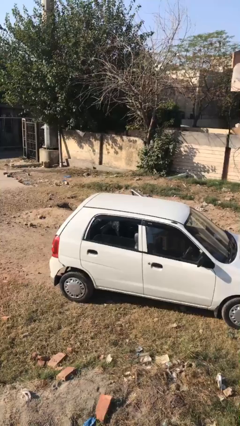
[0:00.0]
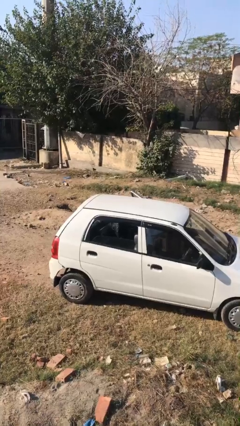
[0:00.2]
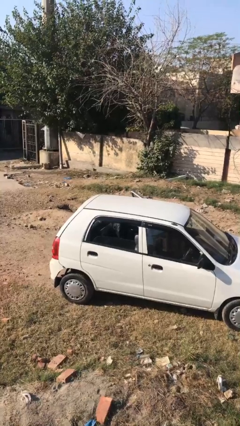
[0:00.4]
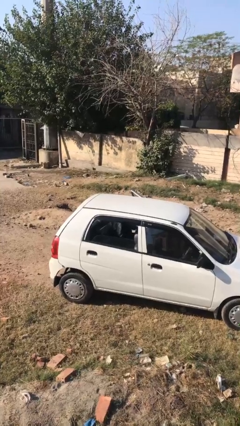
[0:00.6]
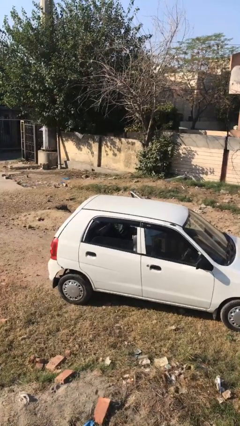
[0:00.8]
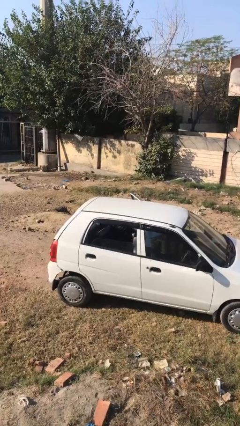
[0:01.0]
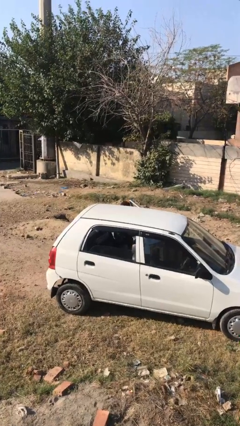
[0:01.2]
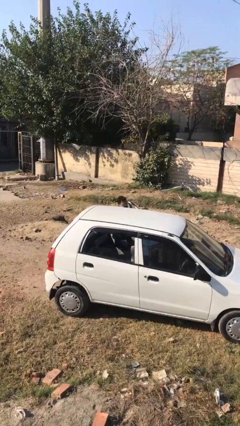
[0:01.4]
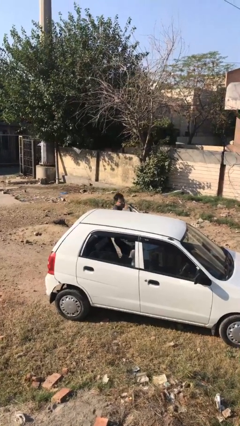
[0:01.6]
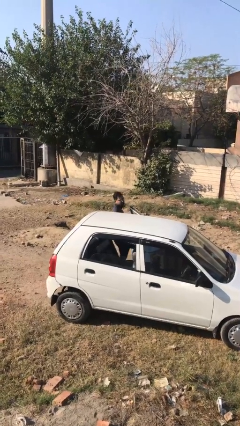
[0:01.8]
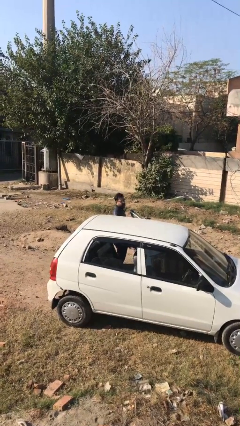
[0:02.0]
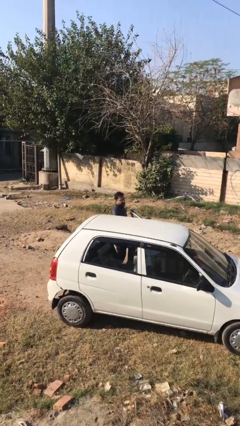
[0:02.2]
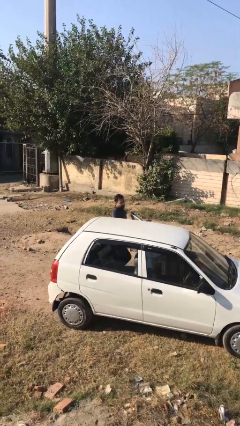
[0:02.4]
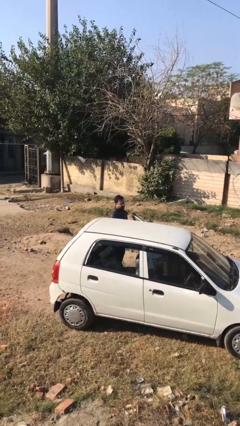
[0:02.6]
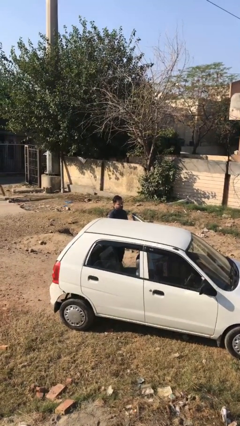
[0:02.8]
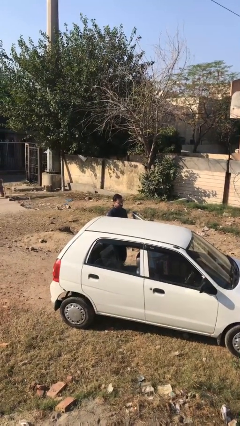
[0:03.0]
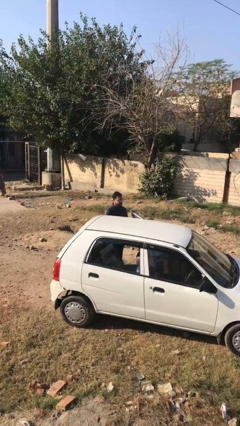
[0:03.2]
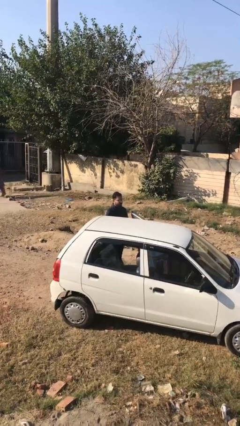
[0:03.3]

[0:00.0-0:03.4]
person exits car

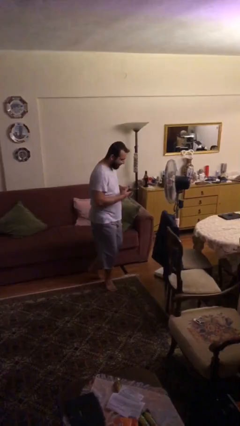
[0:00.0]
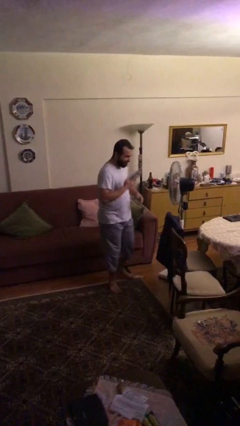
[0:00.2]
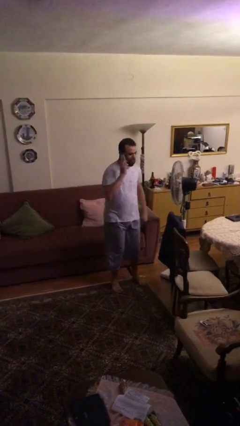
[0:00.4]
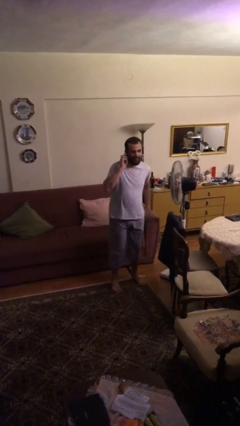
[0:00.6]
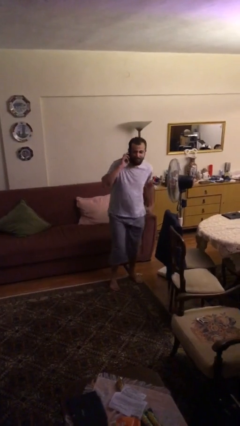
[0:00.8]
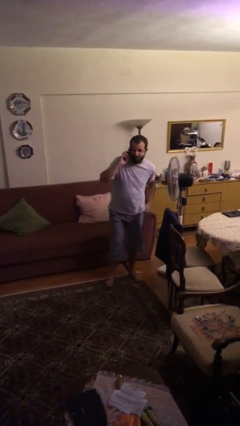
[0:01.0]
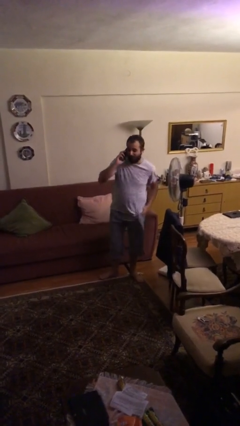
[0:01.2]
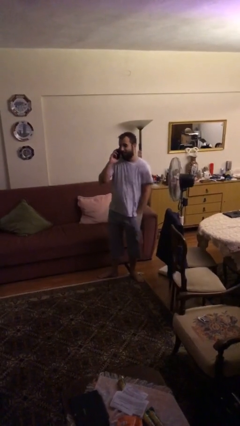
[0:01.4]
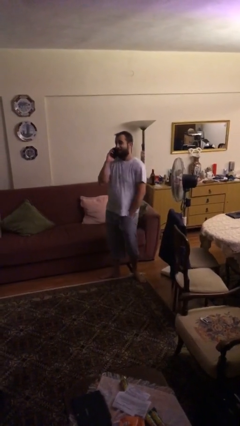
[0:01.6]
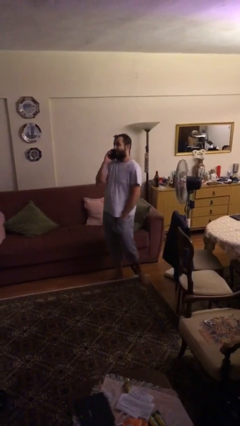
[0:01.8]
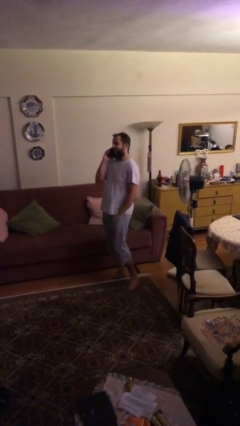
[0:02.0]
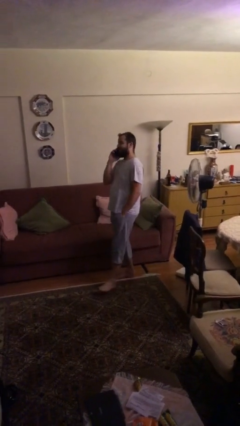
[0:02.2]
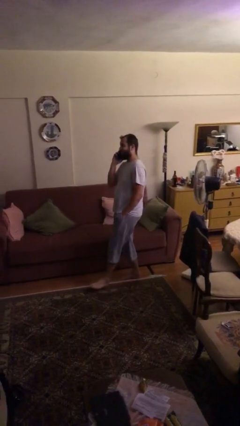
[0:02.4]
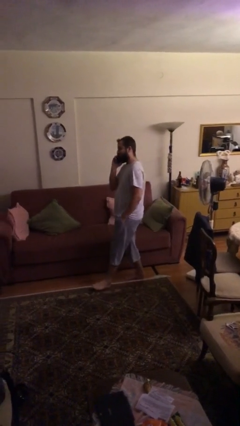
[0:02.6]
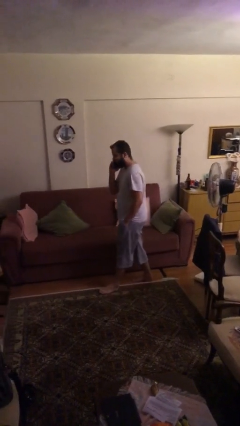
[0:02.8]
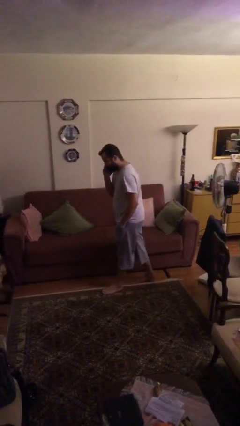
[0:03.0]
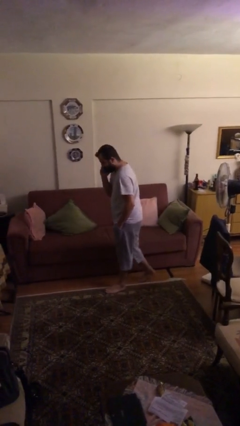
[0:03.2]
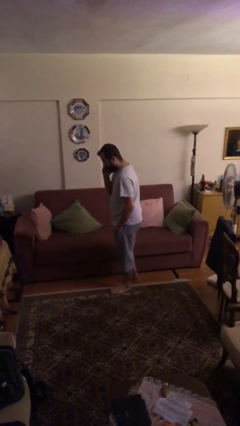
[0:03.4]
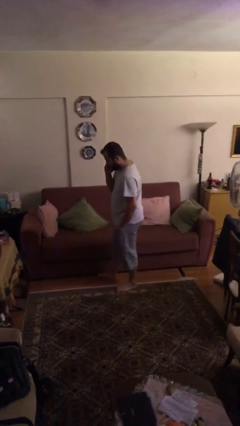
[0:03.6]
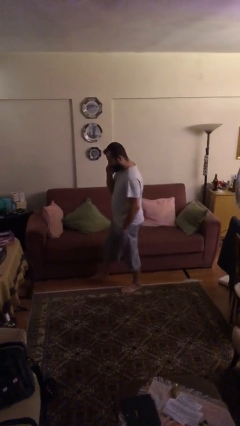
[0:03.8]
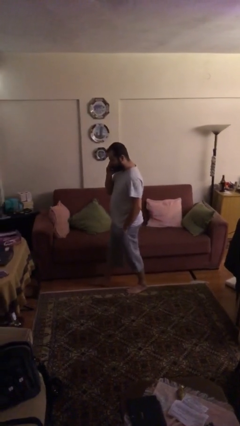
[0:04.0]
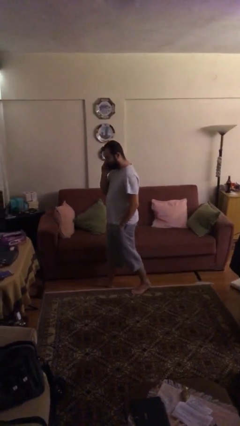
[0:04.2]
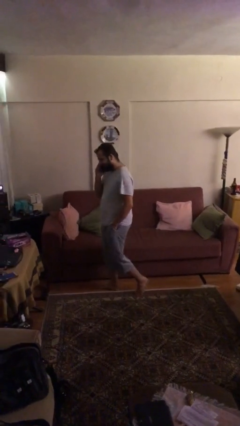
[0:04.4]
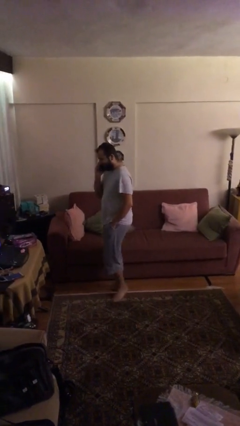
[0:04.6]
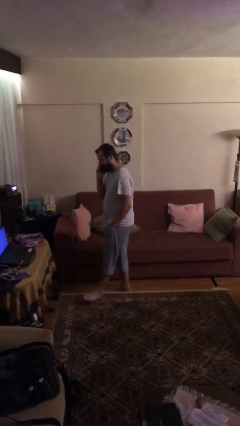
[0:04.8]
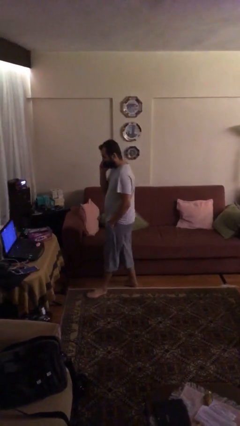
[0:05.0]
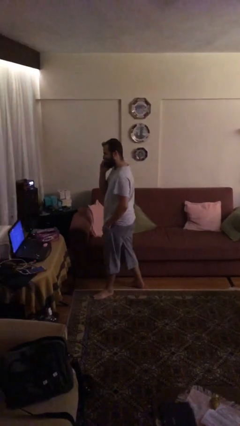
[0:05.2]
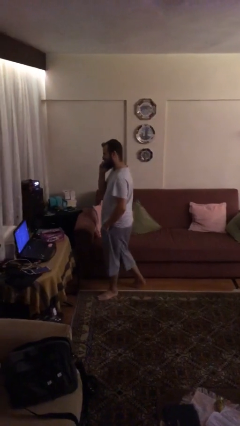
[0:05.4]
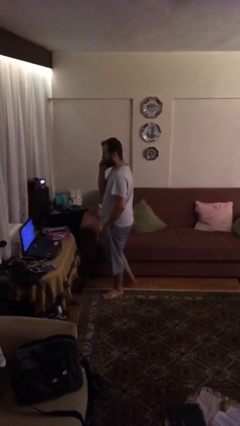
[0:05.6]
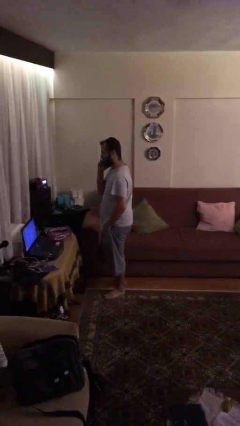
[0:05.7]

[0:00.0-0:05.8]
person talks on phone

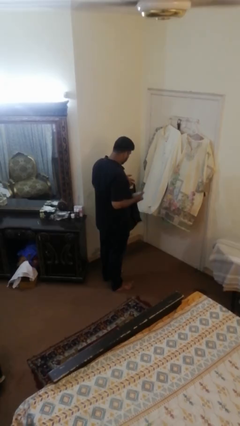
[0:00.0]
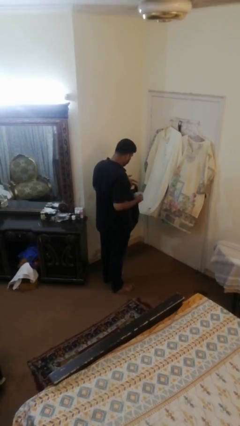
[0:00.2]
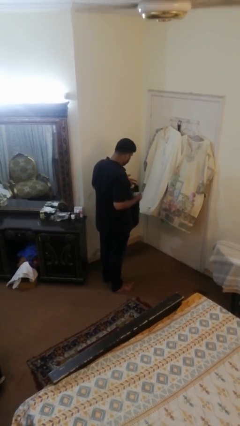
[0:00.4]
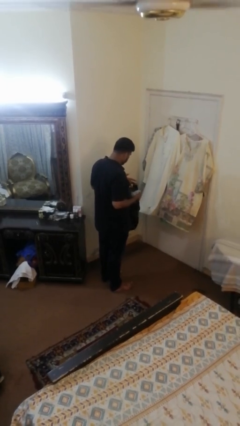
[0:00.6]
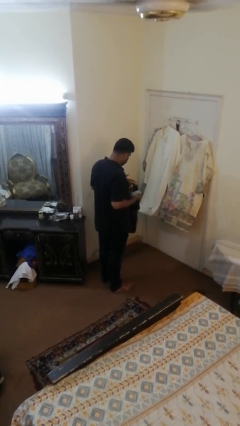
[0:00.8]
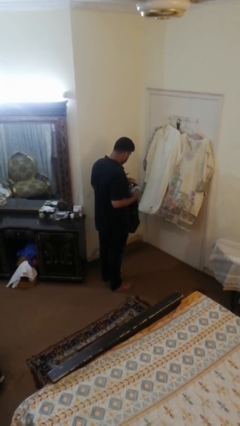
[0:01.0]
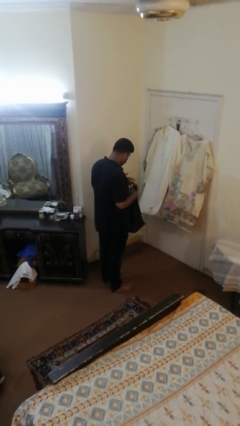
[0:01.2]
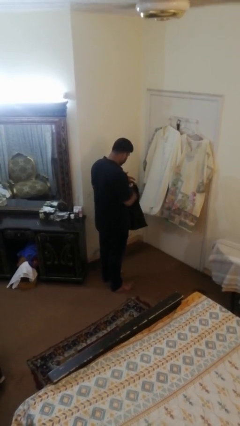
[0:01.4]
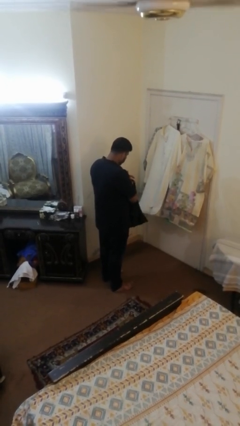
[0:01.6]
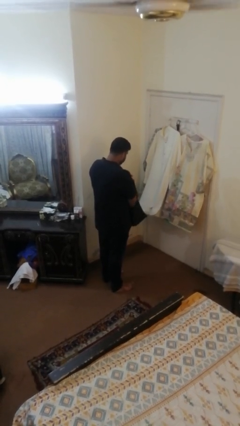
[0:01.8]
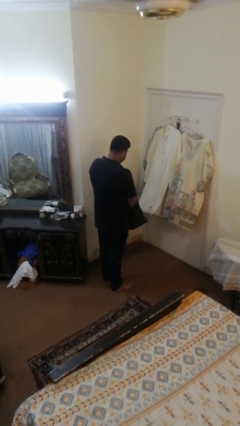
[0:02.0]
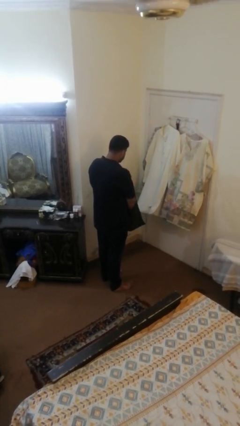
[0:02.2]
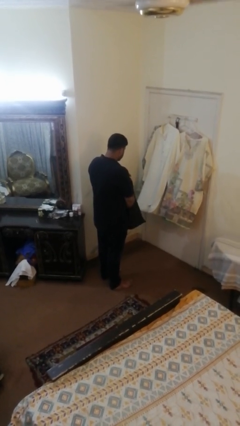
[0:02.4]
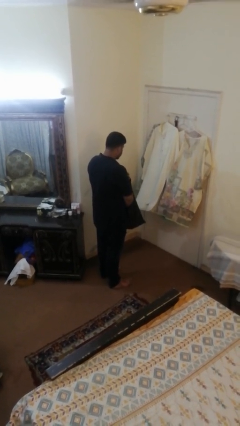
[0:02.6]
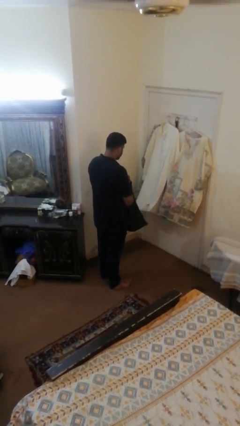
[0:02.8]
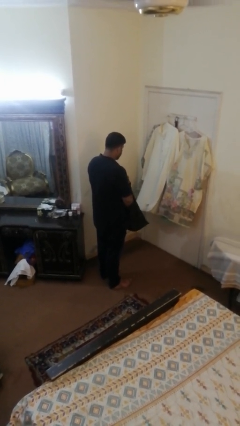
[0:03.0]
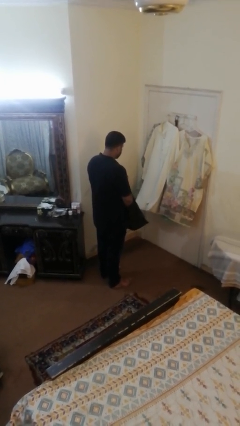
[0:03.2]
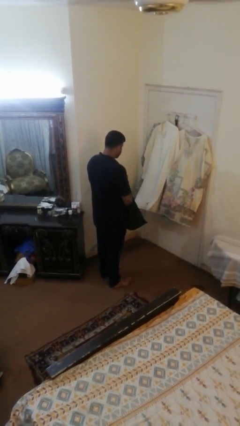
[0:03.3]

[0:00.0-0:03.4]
person puts object into bag

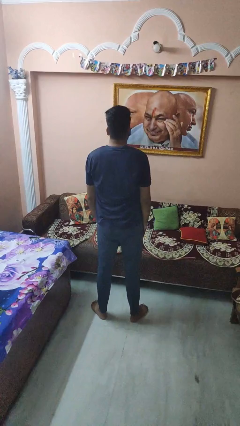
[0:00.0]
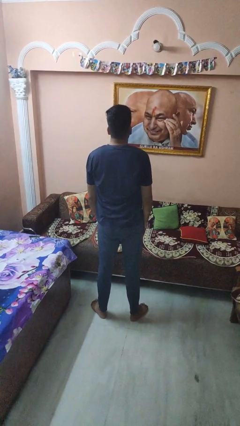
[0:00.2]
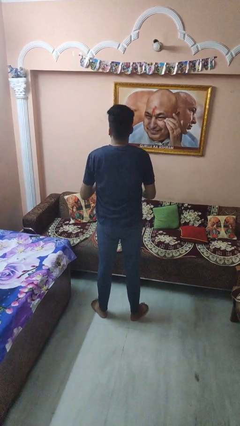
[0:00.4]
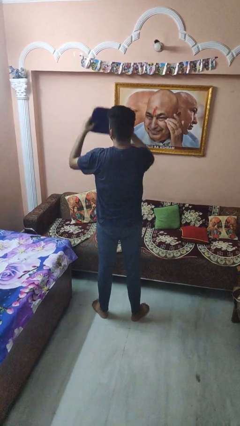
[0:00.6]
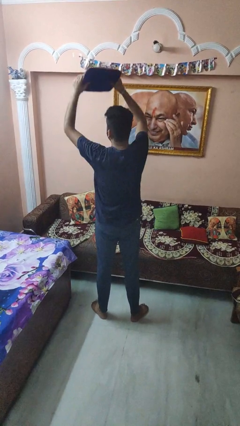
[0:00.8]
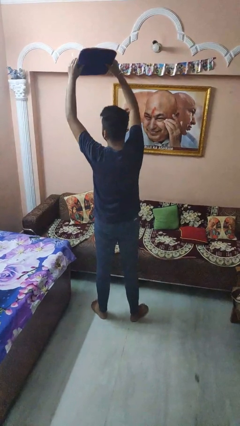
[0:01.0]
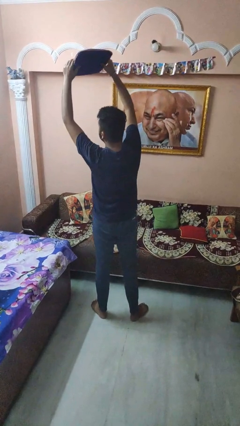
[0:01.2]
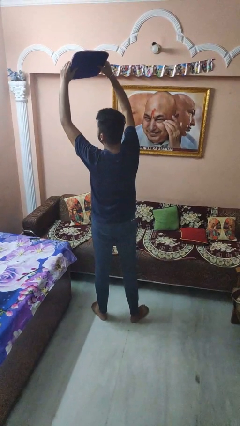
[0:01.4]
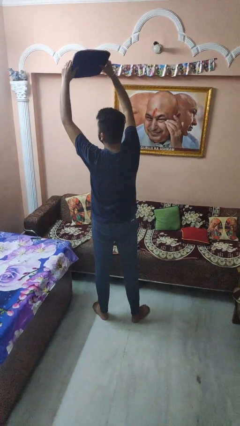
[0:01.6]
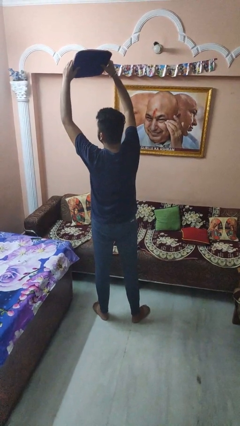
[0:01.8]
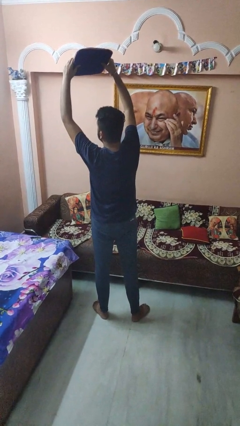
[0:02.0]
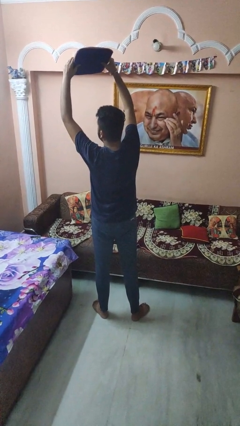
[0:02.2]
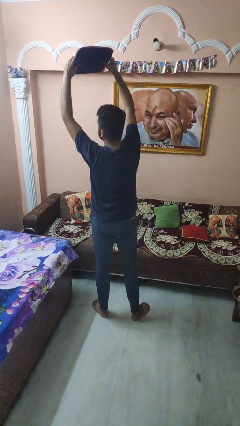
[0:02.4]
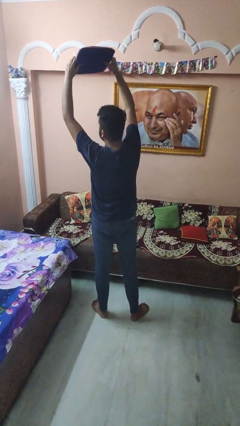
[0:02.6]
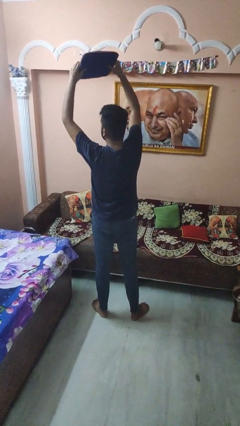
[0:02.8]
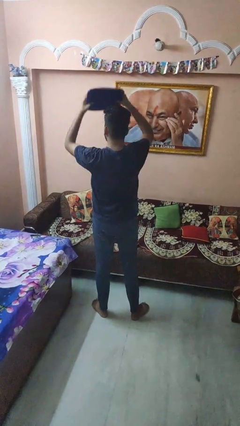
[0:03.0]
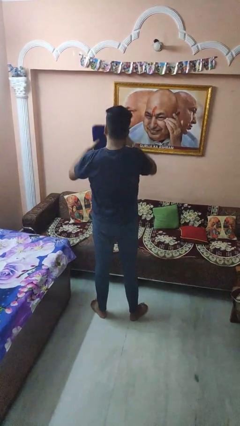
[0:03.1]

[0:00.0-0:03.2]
person holds object above head

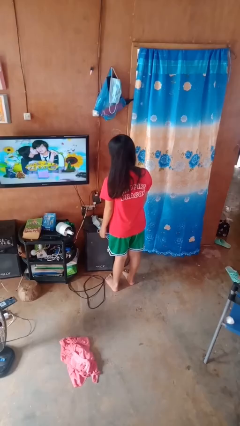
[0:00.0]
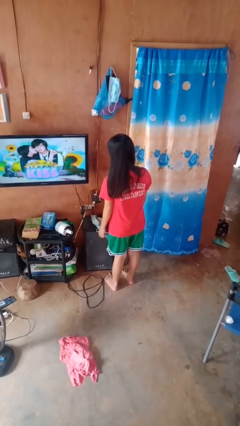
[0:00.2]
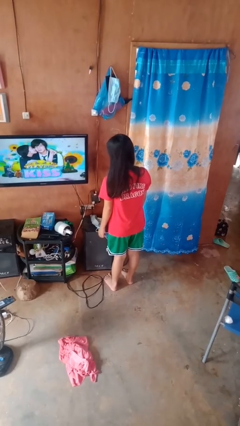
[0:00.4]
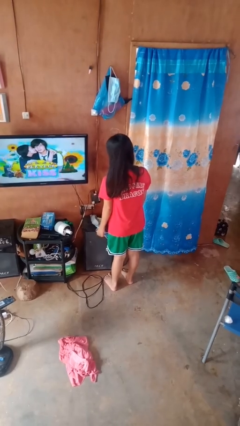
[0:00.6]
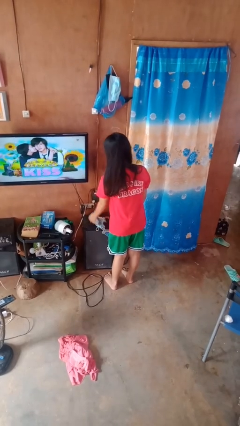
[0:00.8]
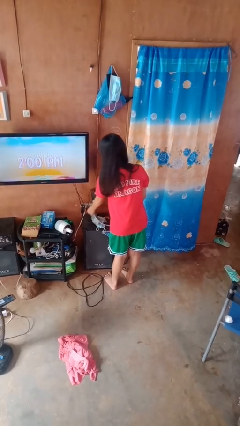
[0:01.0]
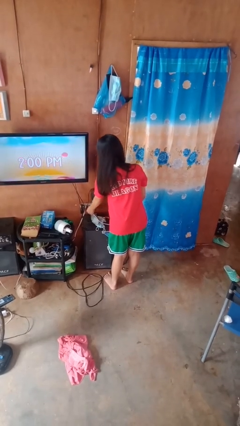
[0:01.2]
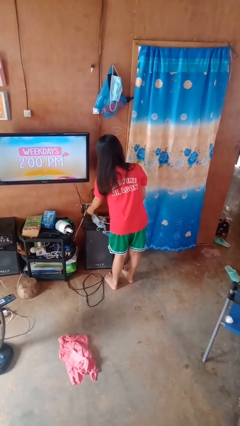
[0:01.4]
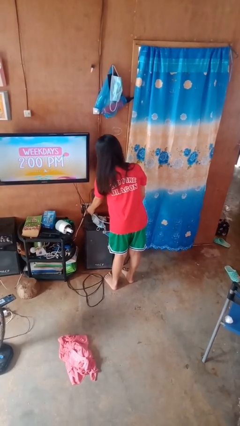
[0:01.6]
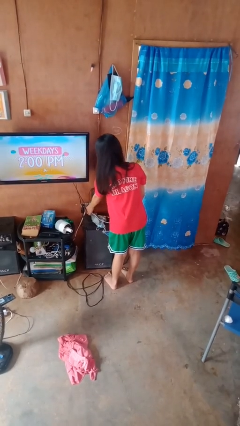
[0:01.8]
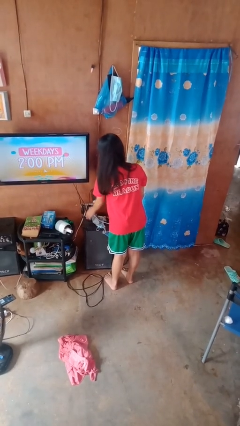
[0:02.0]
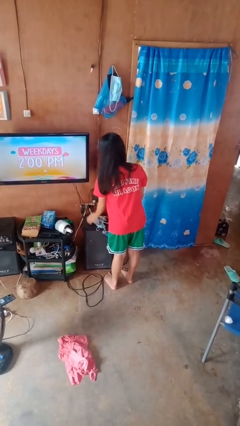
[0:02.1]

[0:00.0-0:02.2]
person plugs into electrical socket
